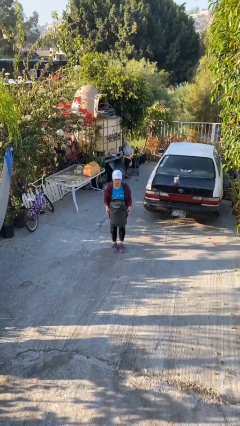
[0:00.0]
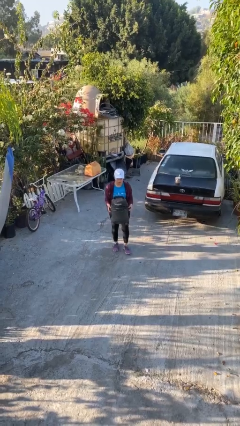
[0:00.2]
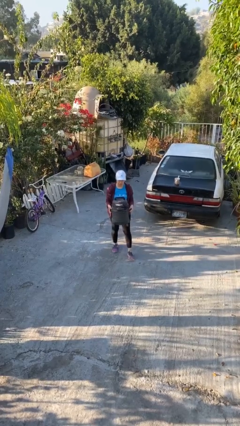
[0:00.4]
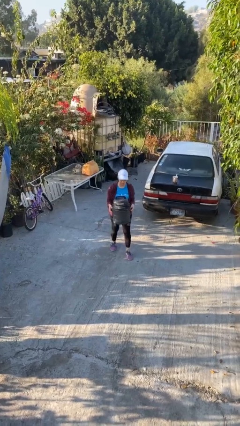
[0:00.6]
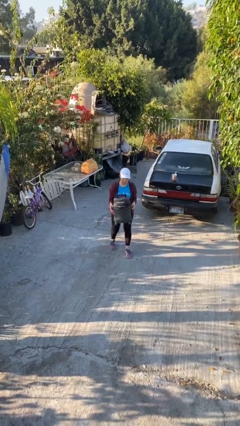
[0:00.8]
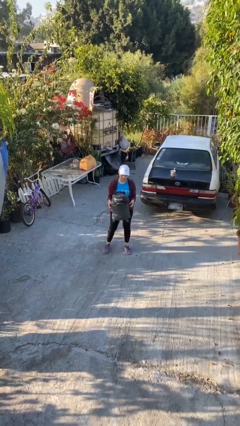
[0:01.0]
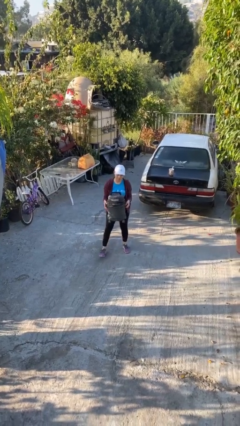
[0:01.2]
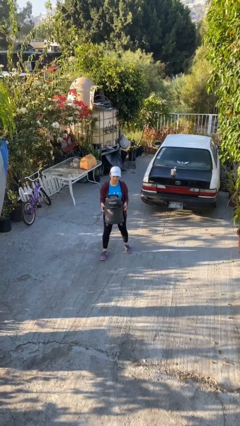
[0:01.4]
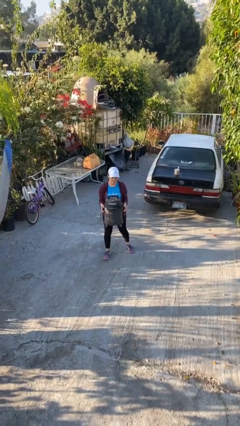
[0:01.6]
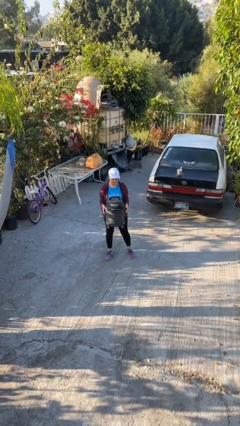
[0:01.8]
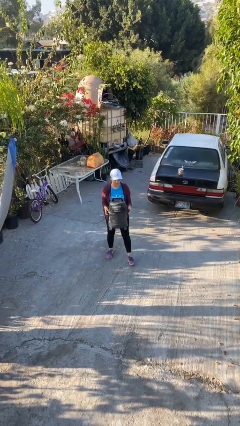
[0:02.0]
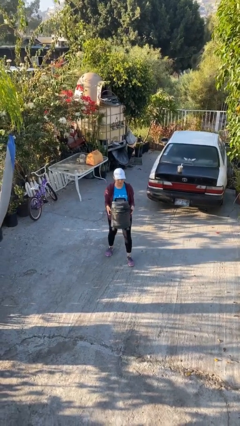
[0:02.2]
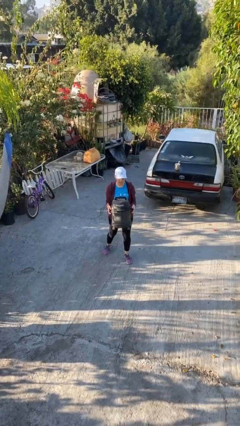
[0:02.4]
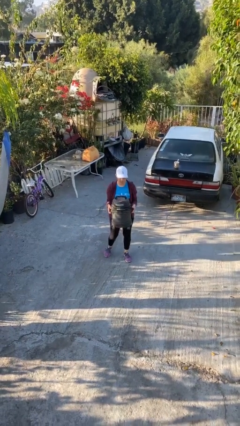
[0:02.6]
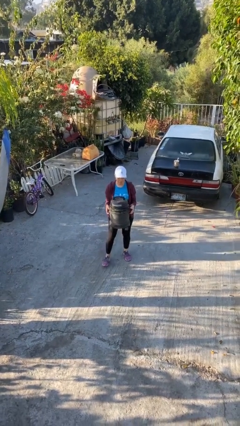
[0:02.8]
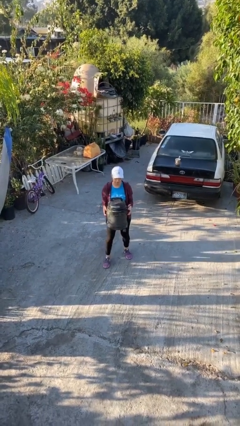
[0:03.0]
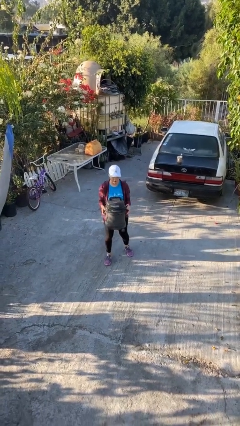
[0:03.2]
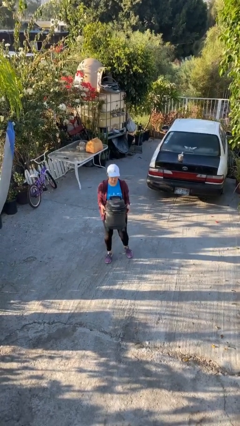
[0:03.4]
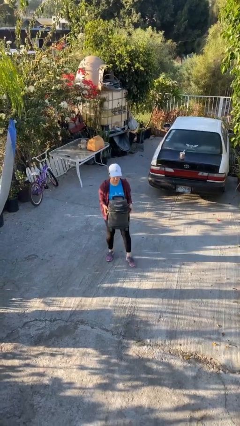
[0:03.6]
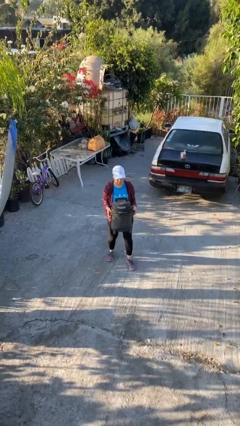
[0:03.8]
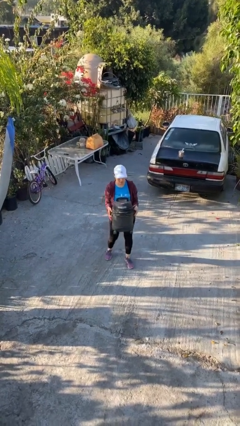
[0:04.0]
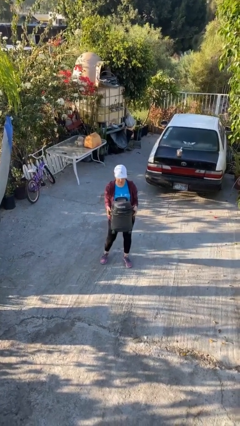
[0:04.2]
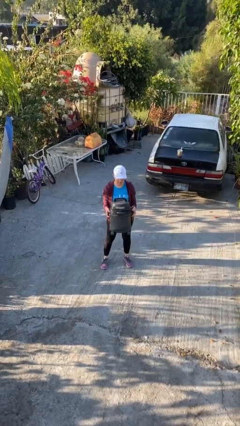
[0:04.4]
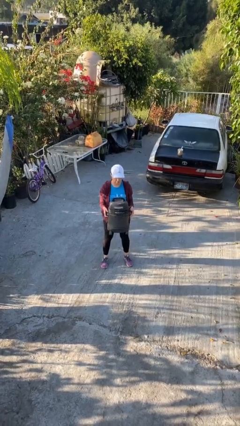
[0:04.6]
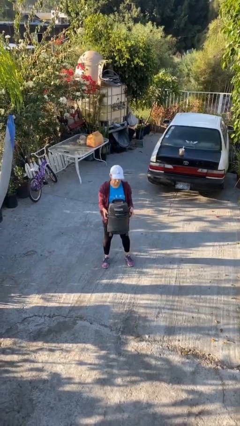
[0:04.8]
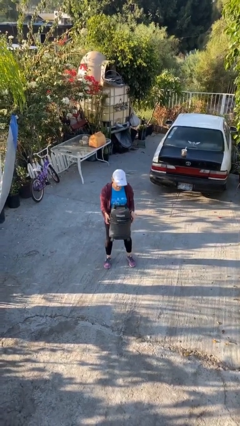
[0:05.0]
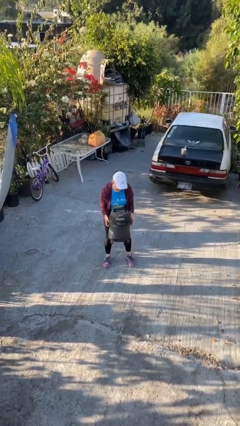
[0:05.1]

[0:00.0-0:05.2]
person carries heavy object

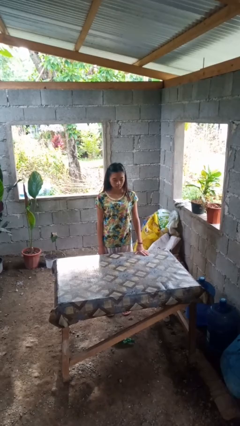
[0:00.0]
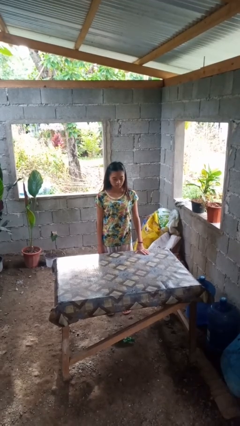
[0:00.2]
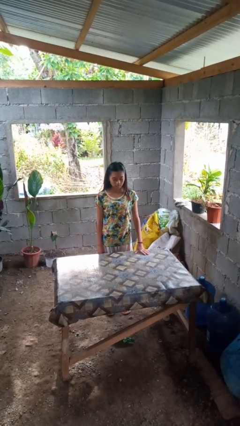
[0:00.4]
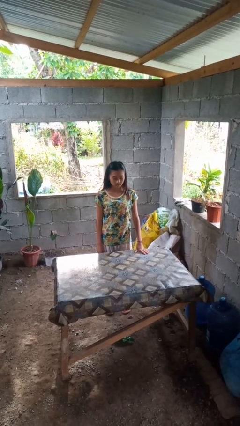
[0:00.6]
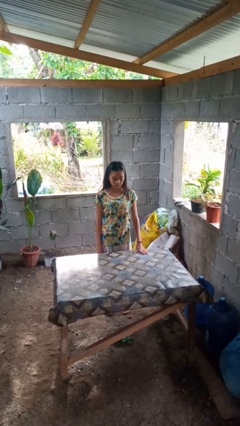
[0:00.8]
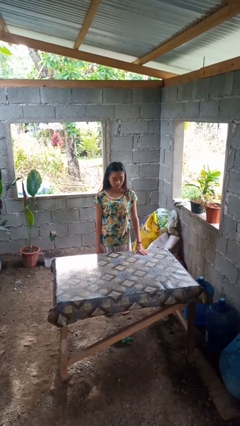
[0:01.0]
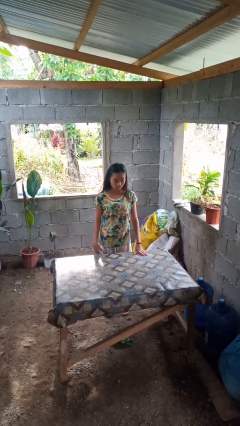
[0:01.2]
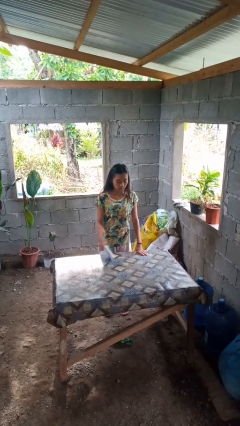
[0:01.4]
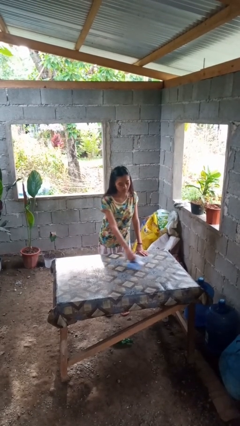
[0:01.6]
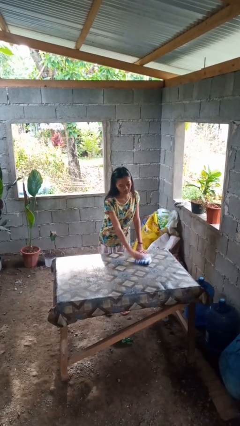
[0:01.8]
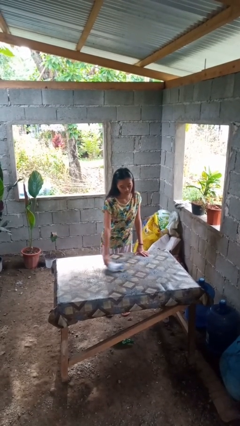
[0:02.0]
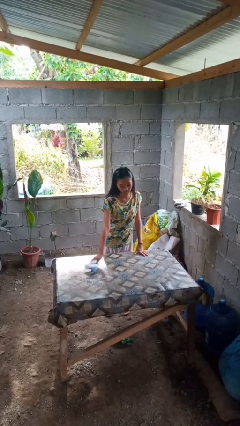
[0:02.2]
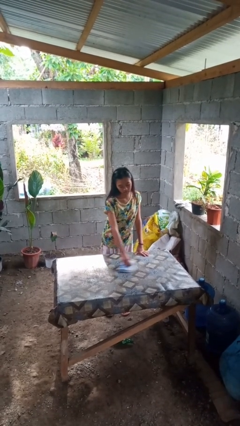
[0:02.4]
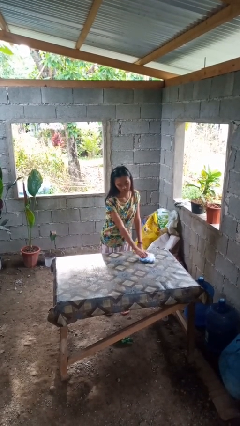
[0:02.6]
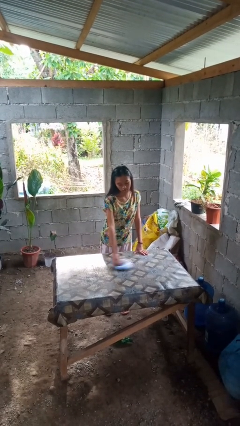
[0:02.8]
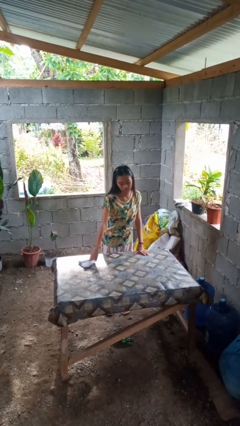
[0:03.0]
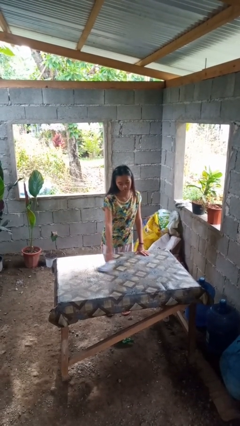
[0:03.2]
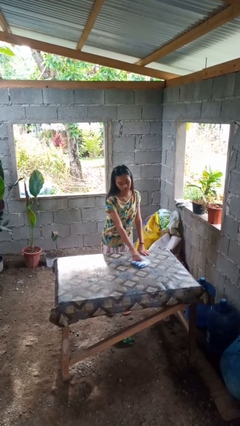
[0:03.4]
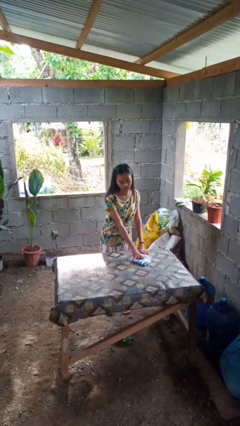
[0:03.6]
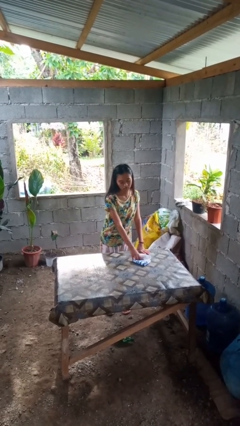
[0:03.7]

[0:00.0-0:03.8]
person cleans table with rag

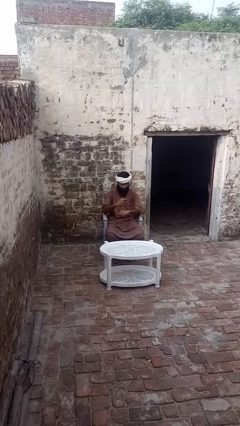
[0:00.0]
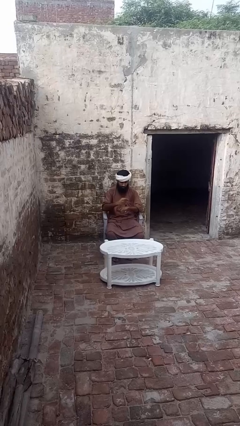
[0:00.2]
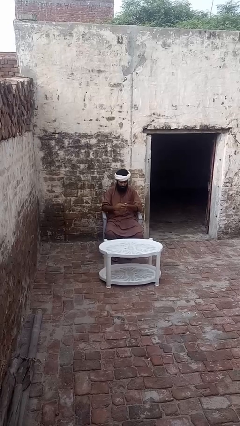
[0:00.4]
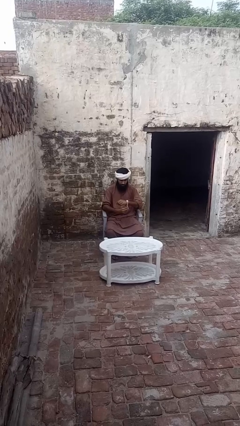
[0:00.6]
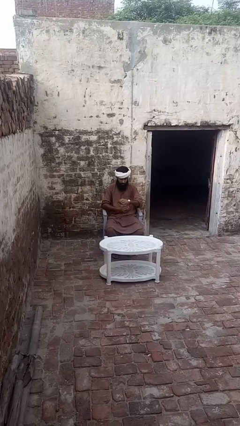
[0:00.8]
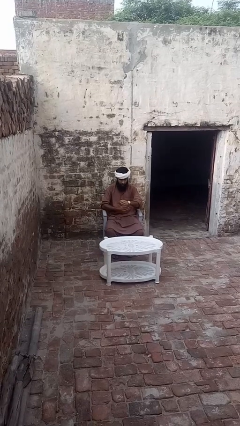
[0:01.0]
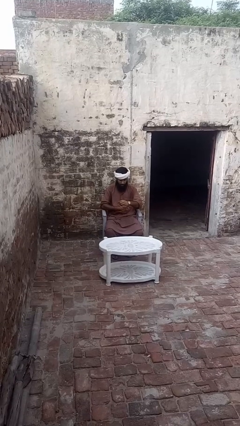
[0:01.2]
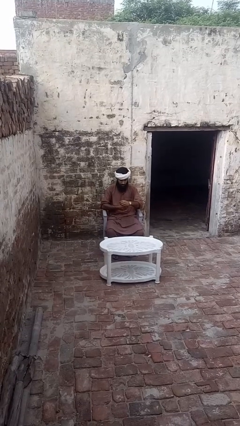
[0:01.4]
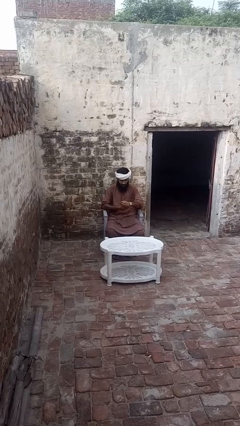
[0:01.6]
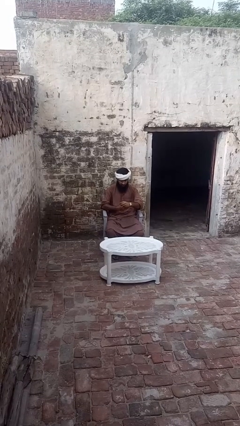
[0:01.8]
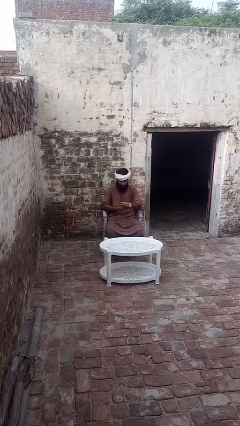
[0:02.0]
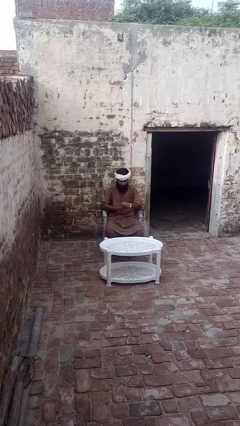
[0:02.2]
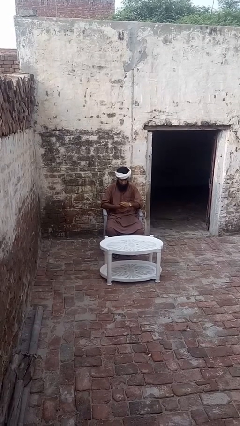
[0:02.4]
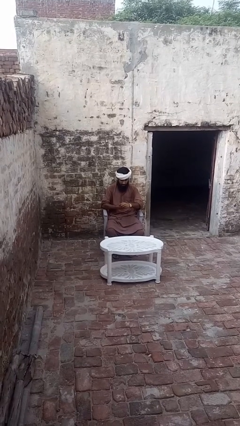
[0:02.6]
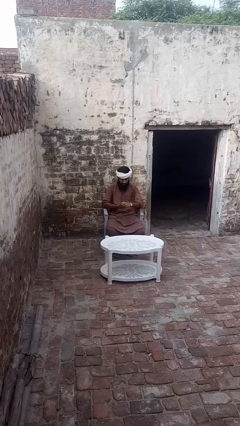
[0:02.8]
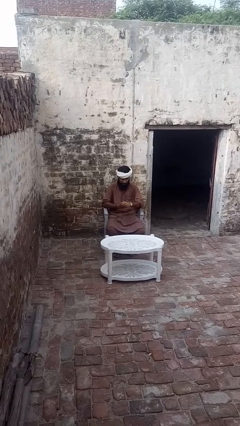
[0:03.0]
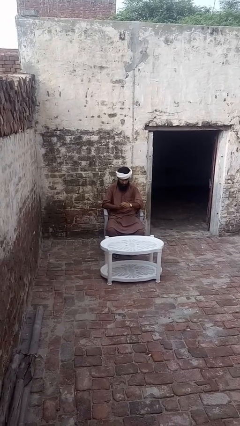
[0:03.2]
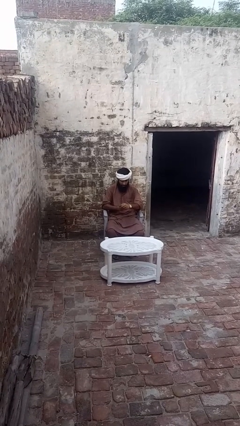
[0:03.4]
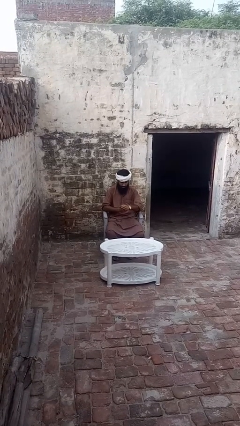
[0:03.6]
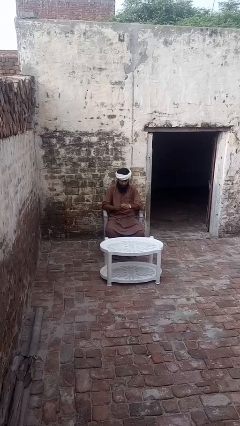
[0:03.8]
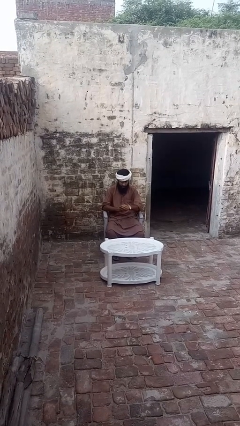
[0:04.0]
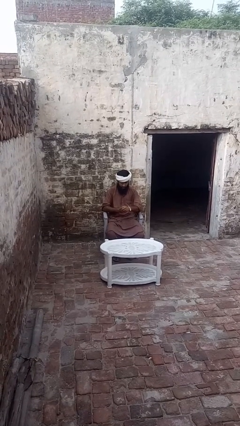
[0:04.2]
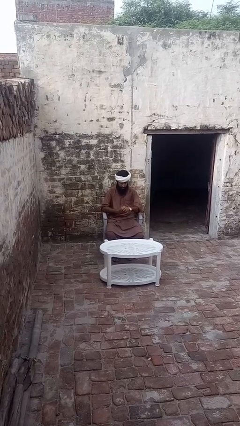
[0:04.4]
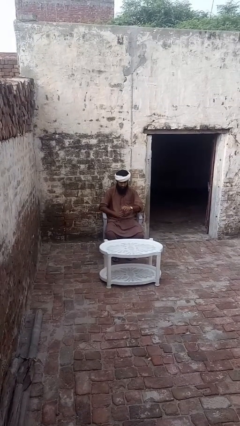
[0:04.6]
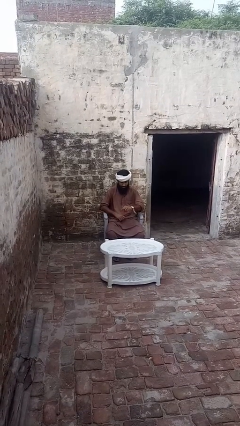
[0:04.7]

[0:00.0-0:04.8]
person puts on wristwatch

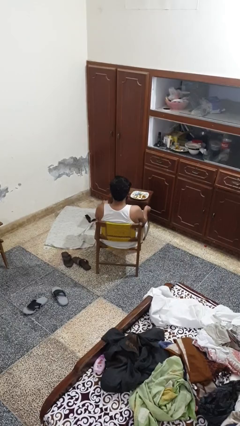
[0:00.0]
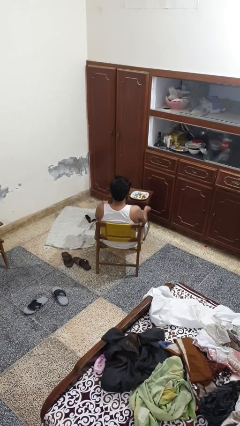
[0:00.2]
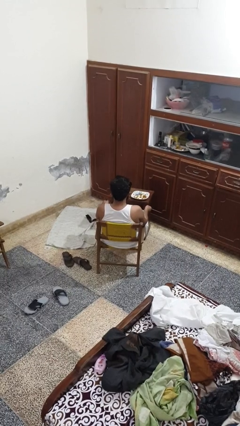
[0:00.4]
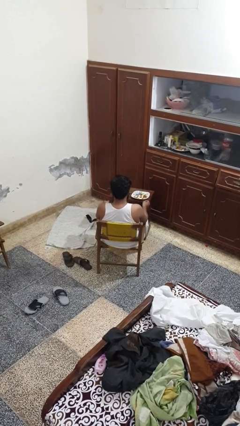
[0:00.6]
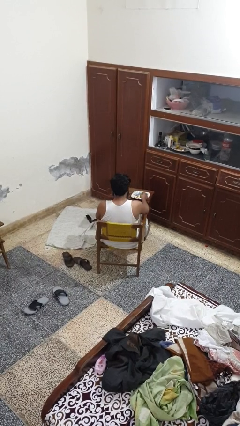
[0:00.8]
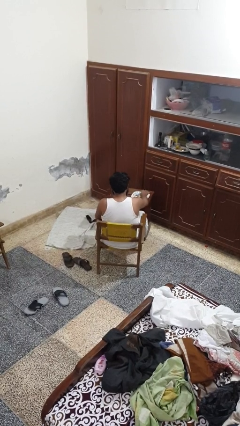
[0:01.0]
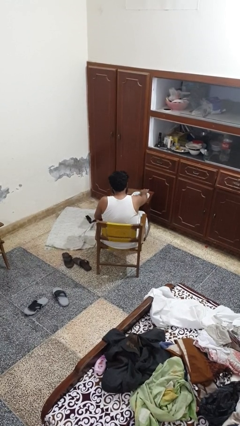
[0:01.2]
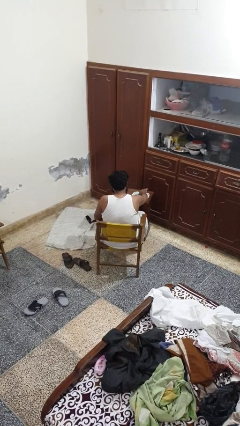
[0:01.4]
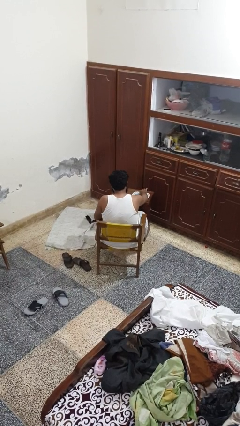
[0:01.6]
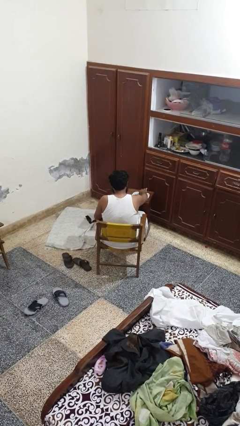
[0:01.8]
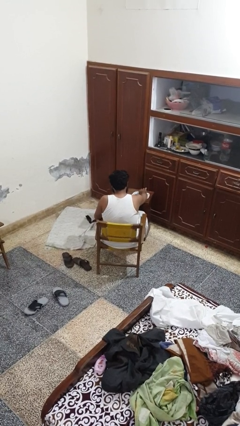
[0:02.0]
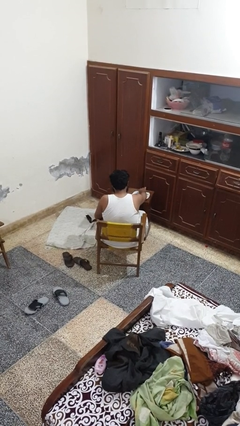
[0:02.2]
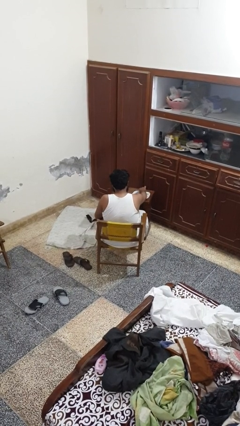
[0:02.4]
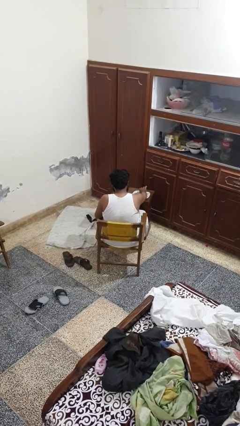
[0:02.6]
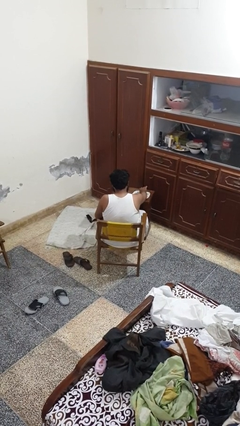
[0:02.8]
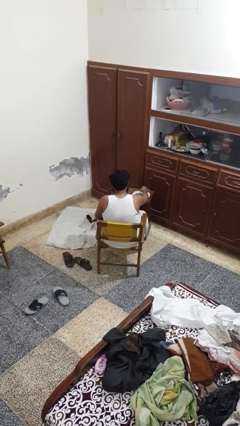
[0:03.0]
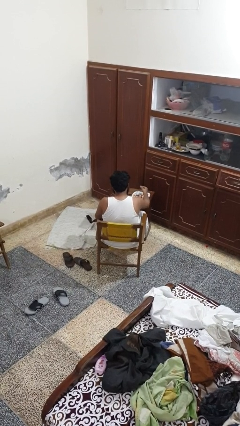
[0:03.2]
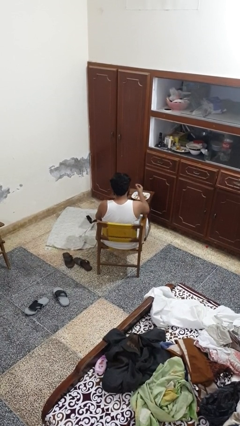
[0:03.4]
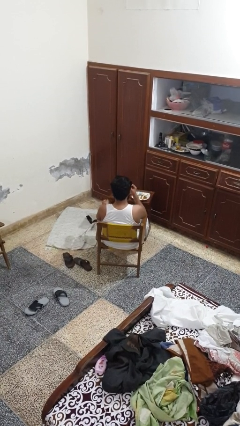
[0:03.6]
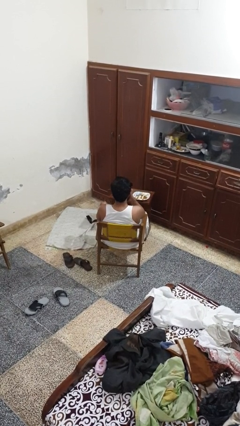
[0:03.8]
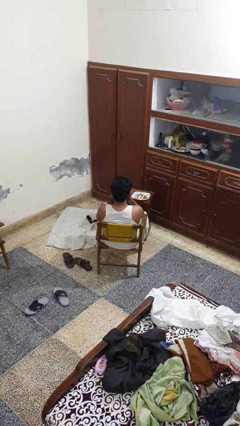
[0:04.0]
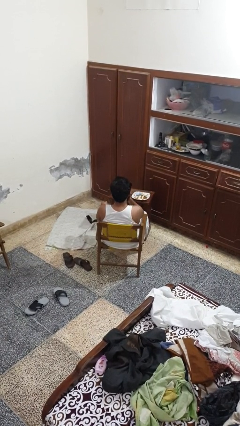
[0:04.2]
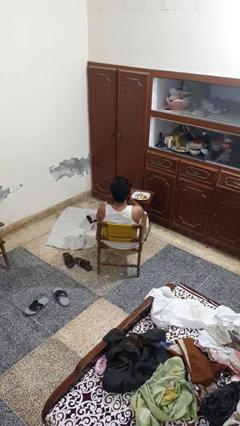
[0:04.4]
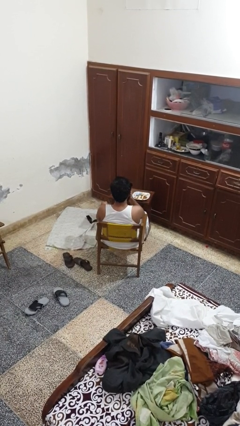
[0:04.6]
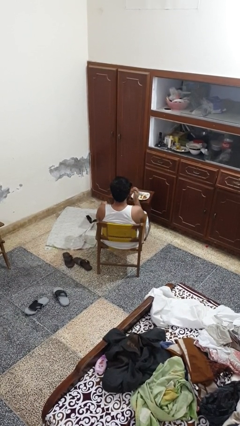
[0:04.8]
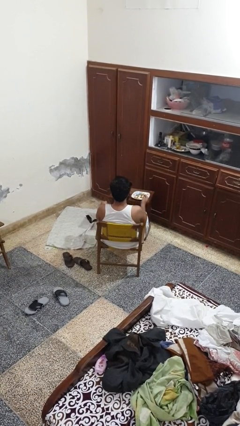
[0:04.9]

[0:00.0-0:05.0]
person eats with hands
